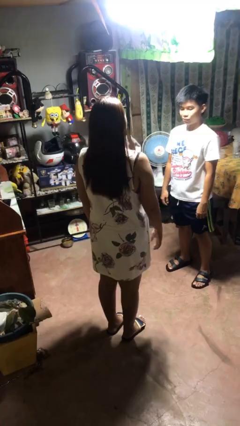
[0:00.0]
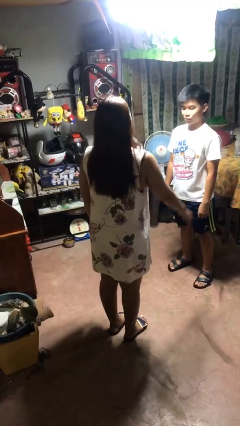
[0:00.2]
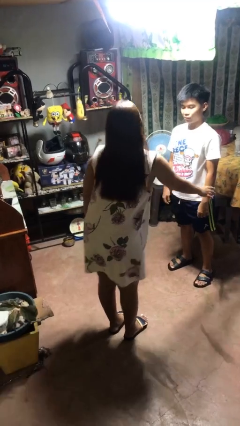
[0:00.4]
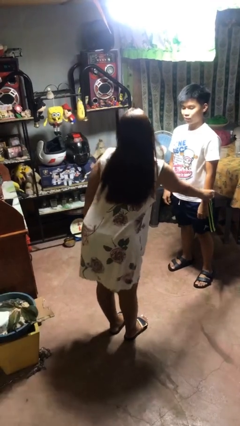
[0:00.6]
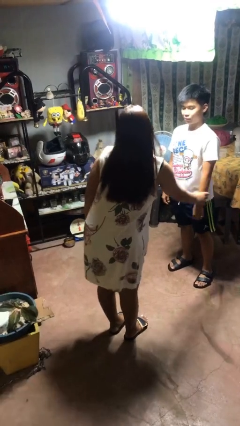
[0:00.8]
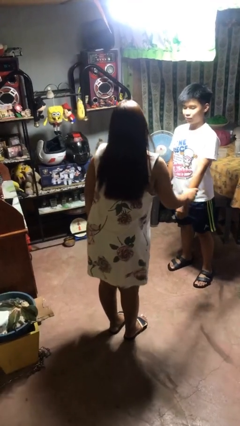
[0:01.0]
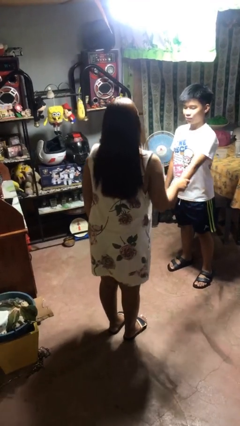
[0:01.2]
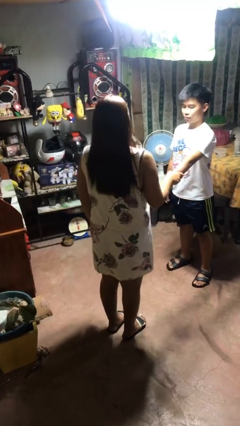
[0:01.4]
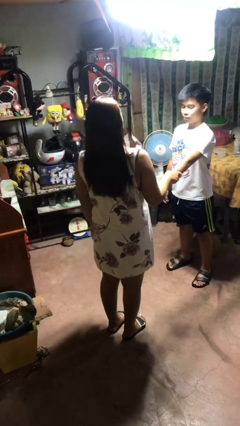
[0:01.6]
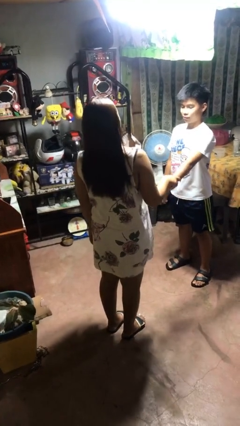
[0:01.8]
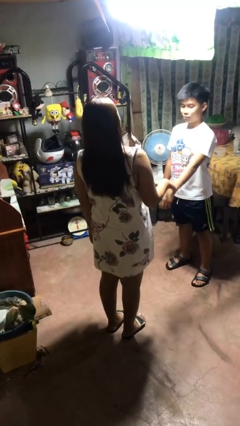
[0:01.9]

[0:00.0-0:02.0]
person grabs person by forearm

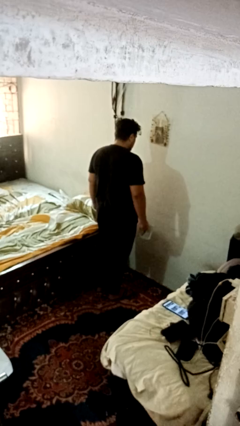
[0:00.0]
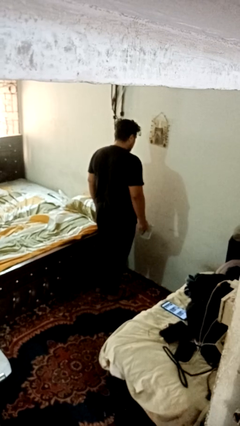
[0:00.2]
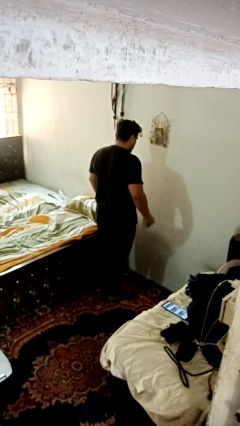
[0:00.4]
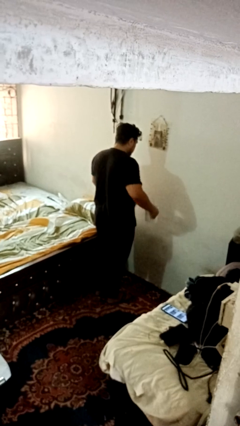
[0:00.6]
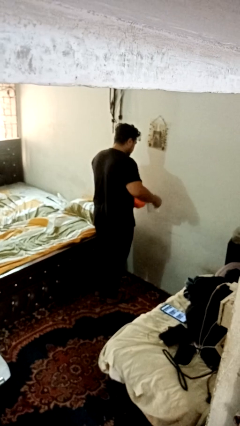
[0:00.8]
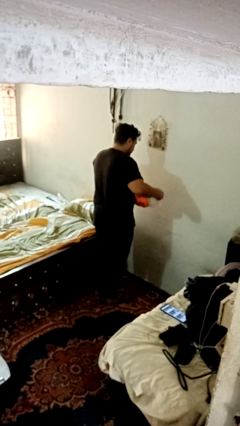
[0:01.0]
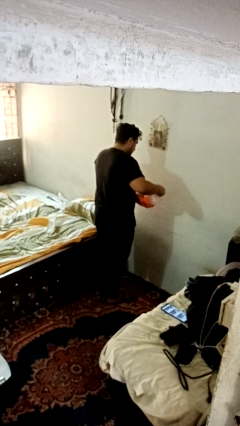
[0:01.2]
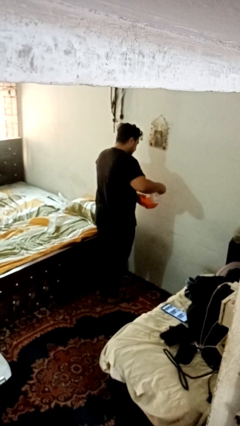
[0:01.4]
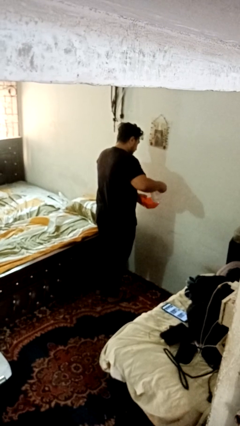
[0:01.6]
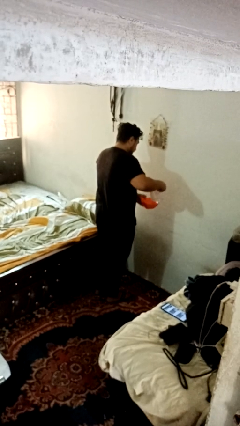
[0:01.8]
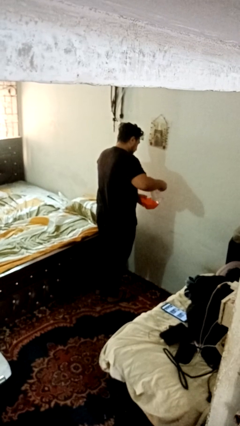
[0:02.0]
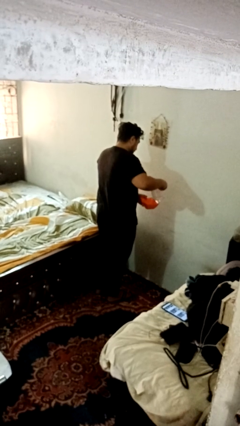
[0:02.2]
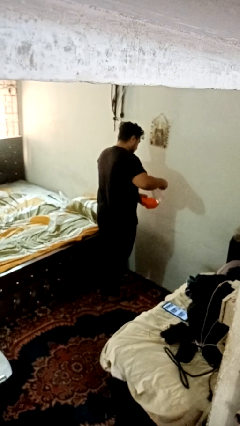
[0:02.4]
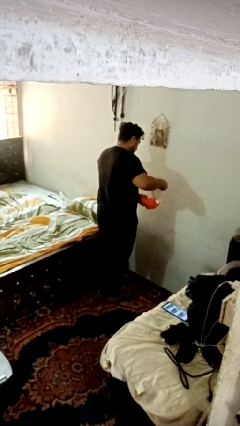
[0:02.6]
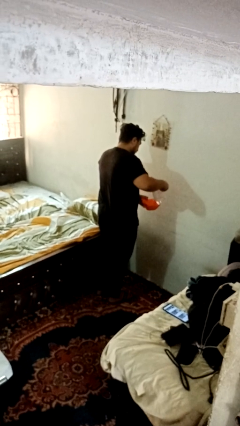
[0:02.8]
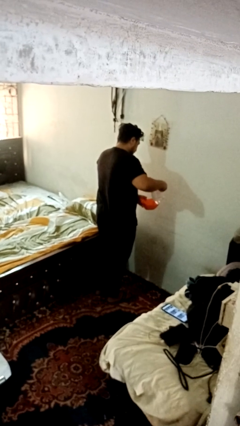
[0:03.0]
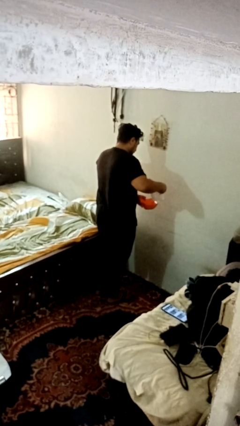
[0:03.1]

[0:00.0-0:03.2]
person pours into bowl

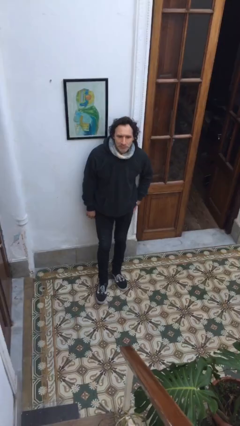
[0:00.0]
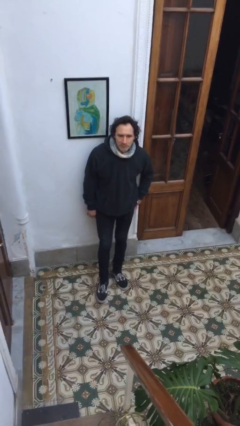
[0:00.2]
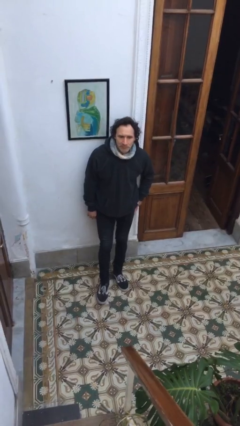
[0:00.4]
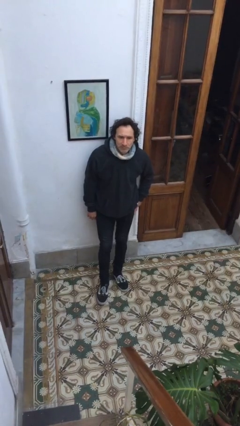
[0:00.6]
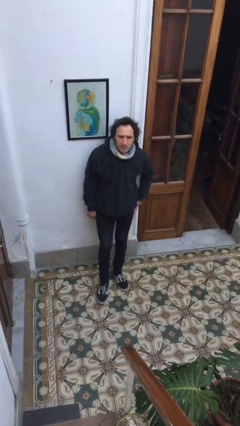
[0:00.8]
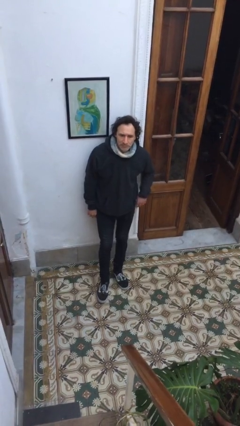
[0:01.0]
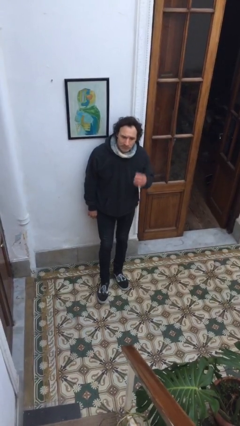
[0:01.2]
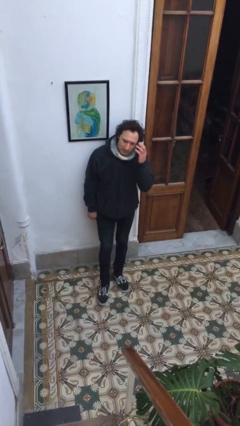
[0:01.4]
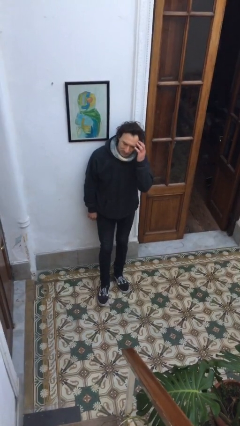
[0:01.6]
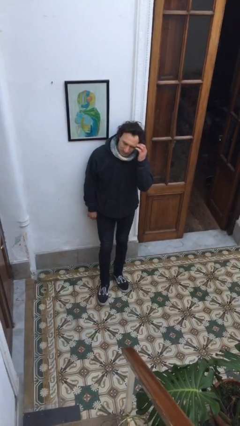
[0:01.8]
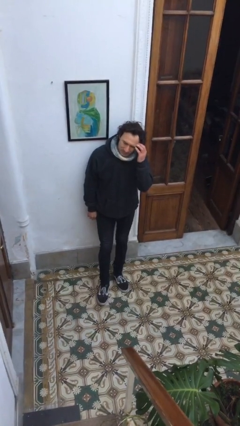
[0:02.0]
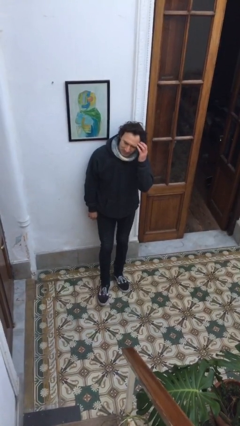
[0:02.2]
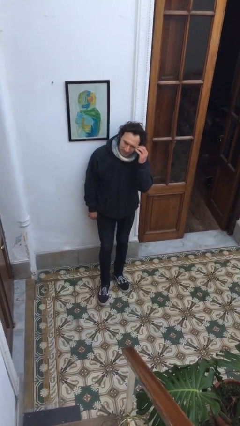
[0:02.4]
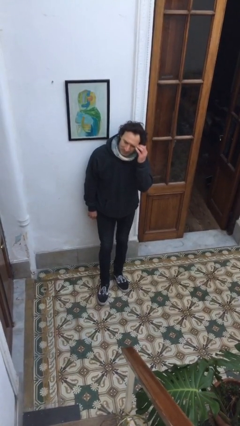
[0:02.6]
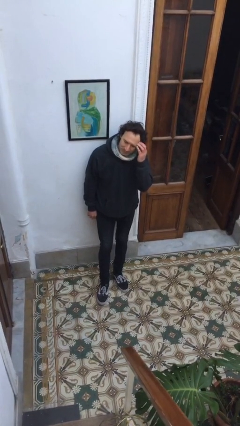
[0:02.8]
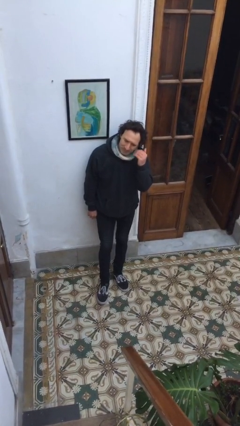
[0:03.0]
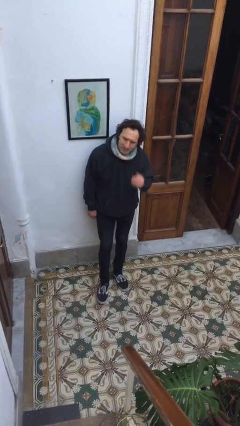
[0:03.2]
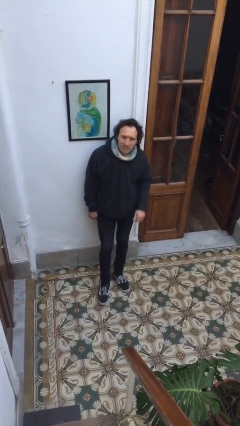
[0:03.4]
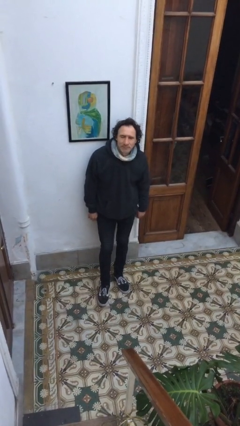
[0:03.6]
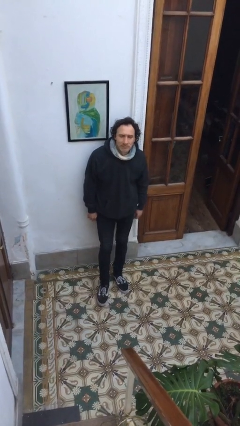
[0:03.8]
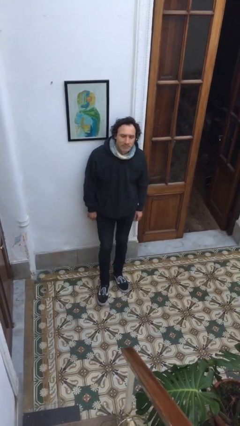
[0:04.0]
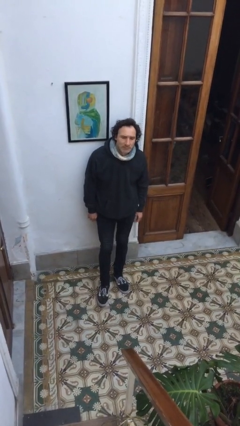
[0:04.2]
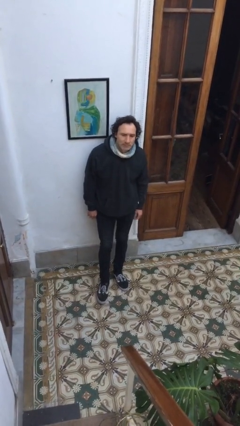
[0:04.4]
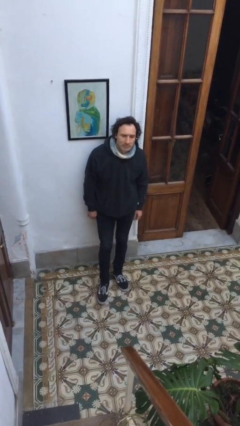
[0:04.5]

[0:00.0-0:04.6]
person scratches face

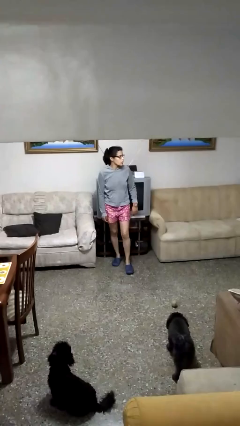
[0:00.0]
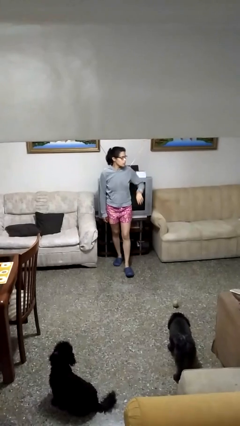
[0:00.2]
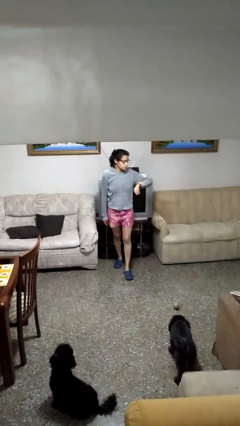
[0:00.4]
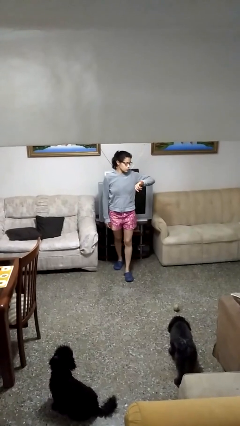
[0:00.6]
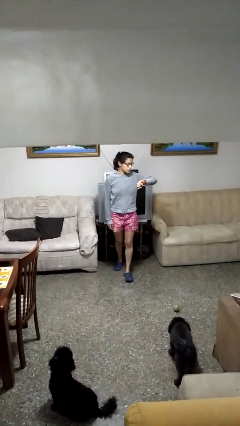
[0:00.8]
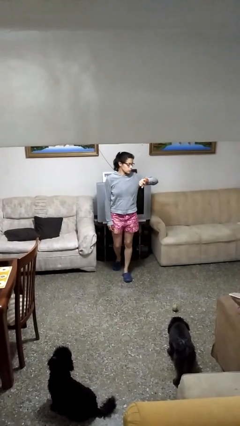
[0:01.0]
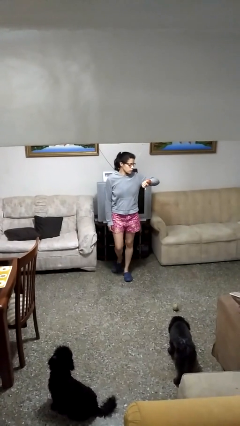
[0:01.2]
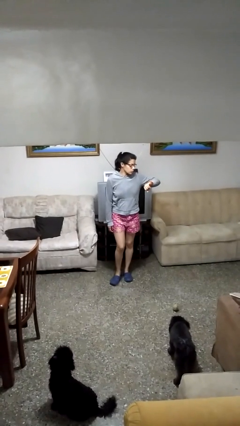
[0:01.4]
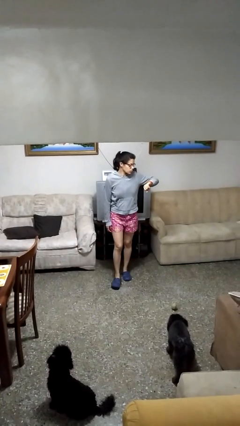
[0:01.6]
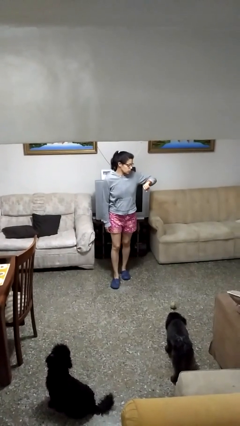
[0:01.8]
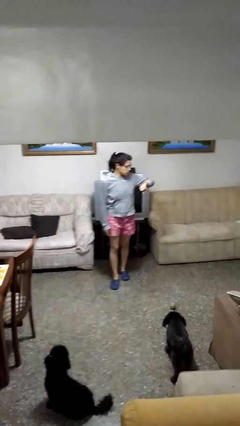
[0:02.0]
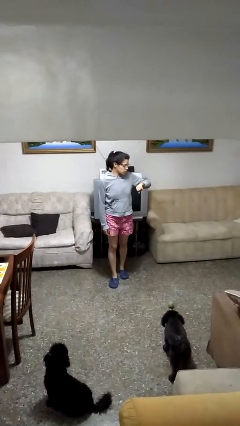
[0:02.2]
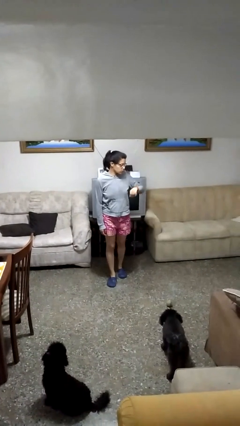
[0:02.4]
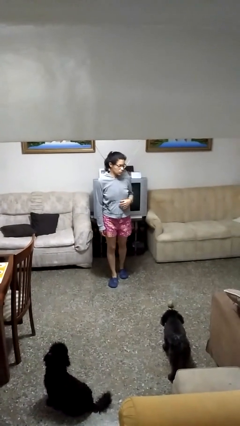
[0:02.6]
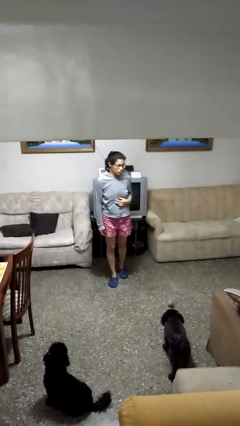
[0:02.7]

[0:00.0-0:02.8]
person looks at wristwatch

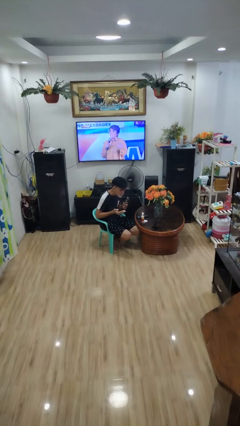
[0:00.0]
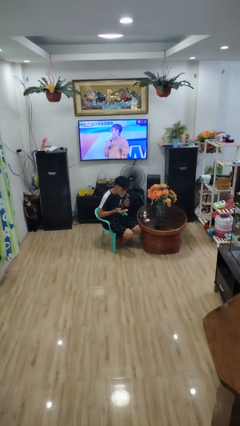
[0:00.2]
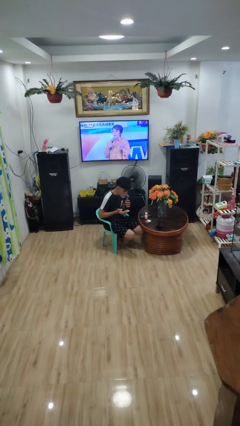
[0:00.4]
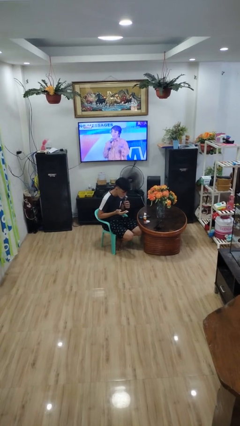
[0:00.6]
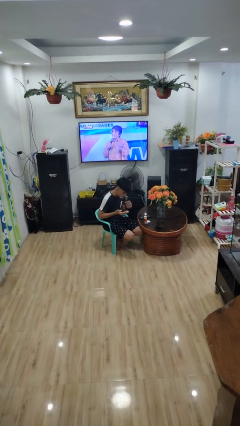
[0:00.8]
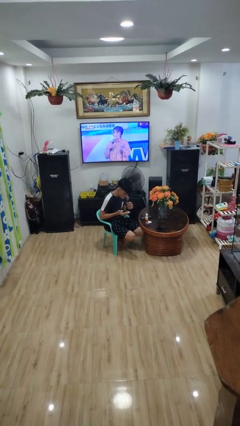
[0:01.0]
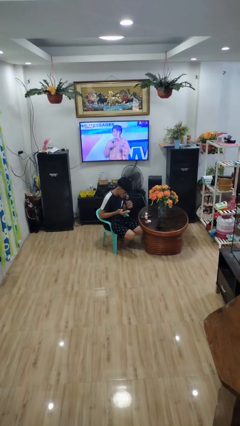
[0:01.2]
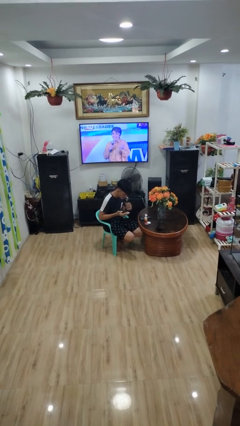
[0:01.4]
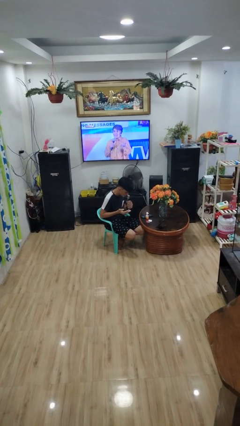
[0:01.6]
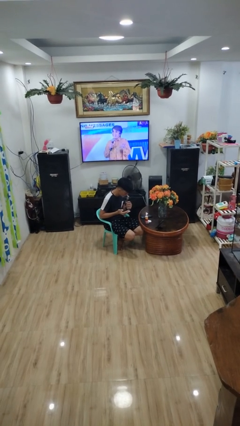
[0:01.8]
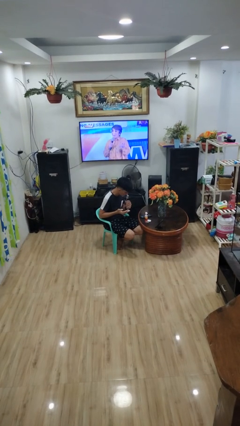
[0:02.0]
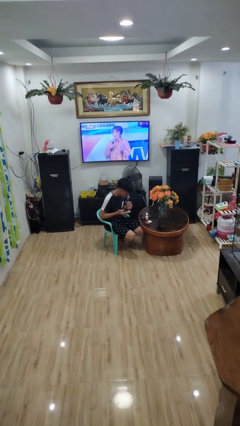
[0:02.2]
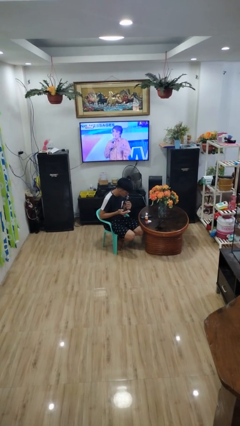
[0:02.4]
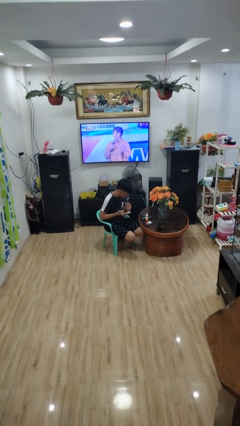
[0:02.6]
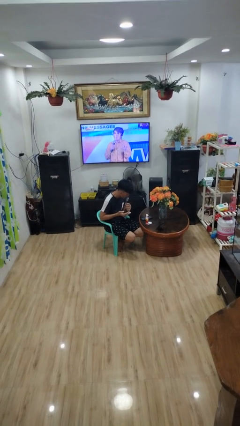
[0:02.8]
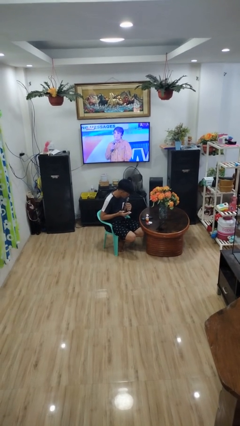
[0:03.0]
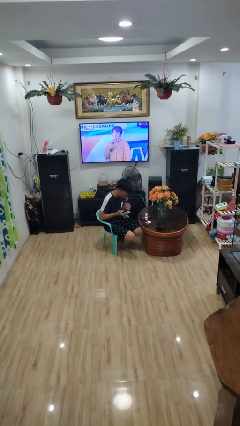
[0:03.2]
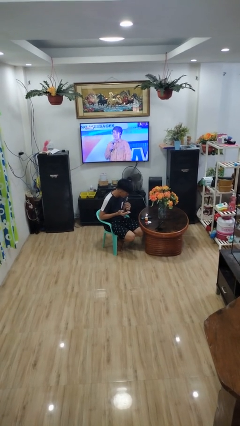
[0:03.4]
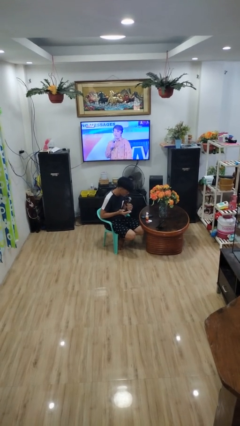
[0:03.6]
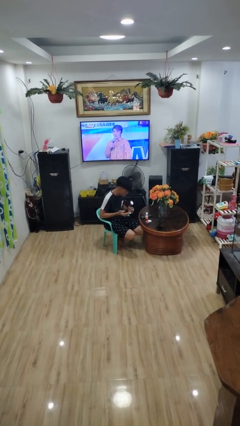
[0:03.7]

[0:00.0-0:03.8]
person shaves face

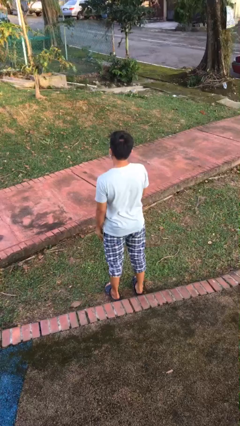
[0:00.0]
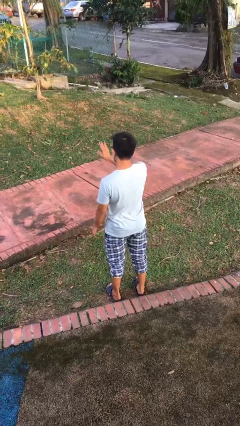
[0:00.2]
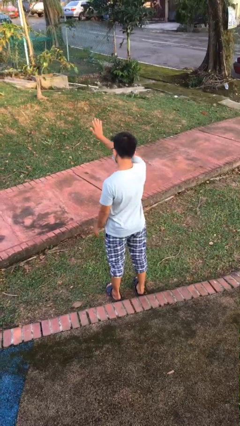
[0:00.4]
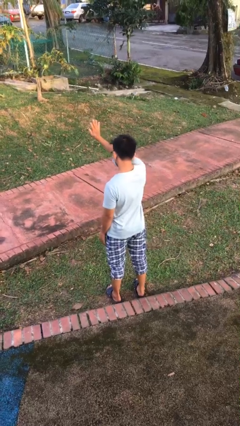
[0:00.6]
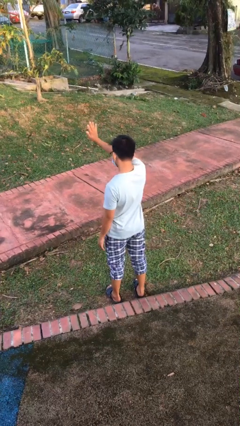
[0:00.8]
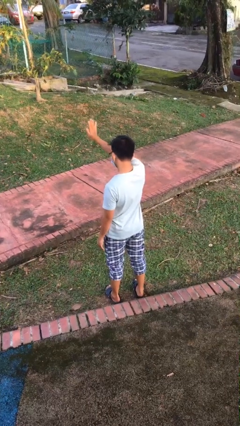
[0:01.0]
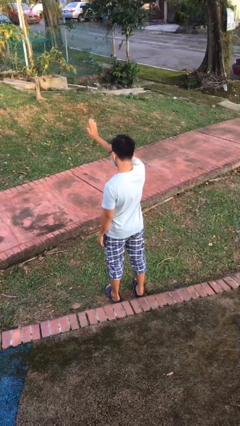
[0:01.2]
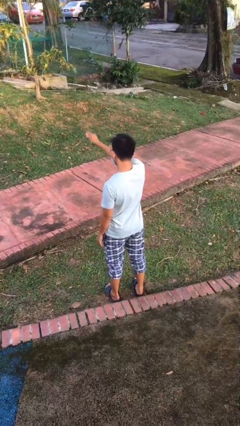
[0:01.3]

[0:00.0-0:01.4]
person gestures stop
